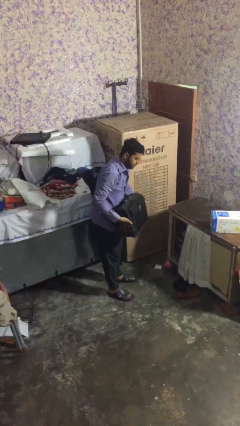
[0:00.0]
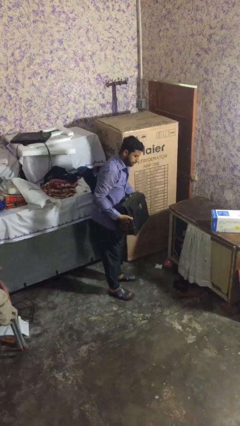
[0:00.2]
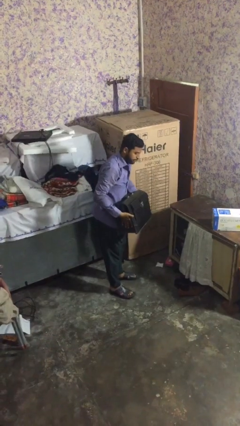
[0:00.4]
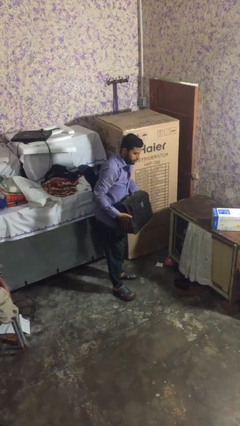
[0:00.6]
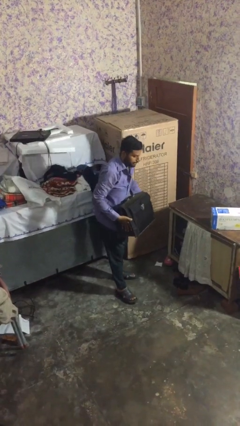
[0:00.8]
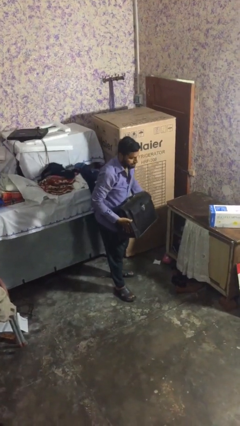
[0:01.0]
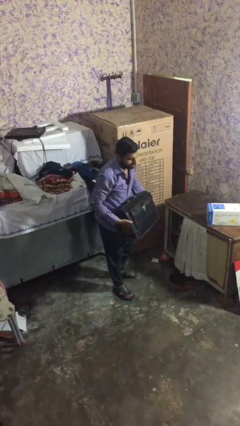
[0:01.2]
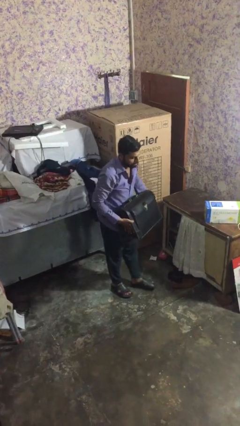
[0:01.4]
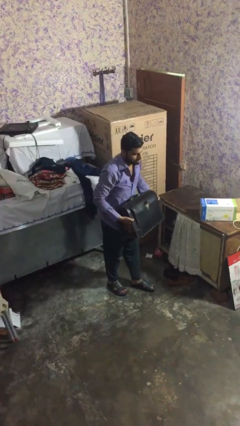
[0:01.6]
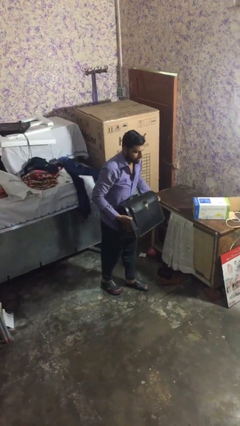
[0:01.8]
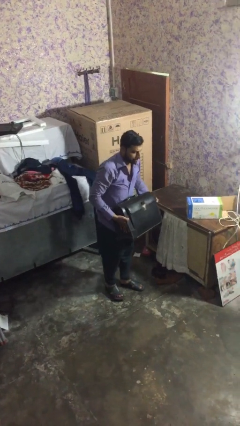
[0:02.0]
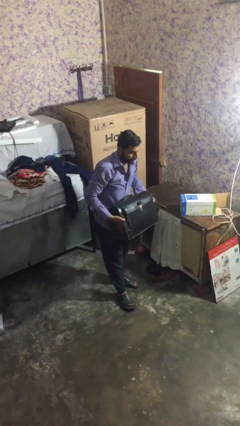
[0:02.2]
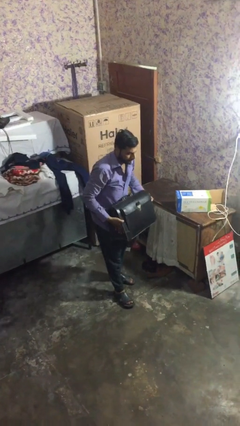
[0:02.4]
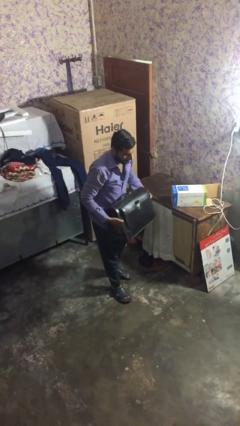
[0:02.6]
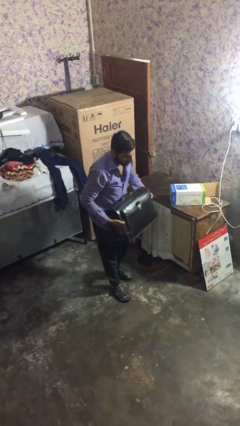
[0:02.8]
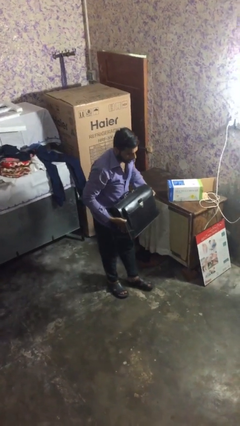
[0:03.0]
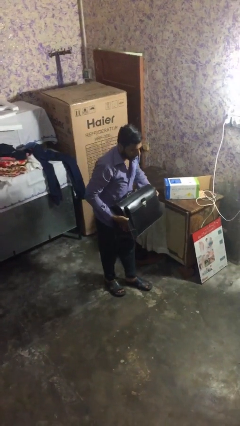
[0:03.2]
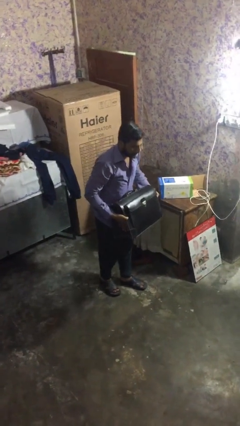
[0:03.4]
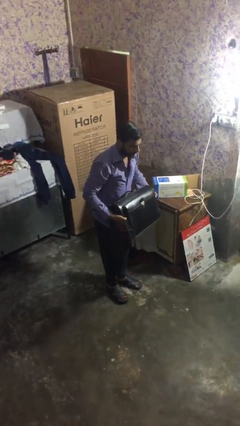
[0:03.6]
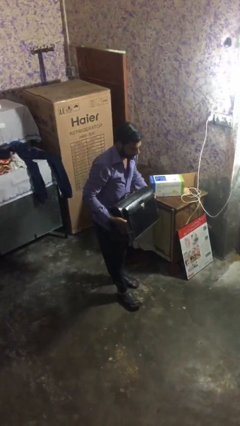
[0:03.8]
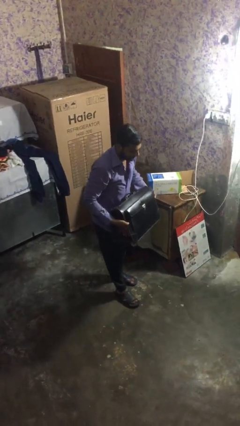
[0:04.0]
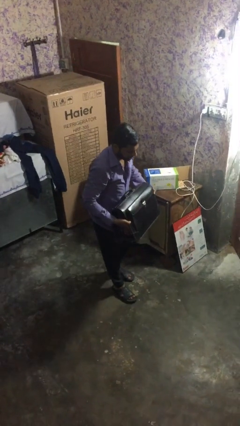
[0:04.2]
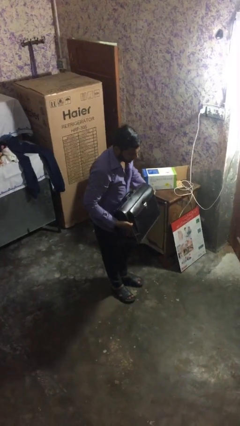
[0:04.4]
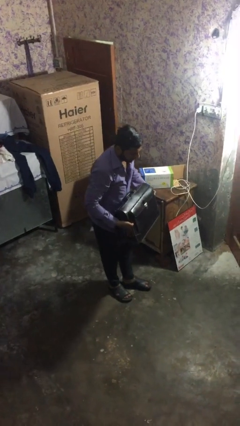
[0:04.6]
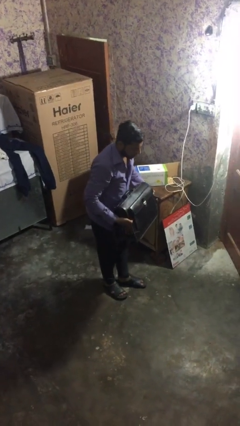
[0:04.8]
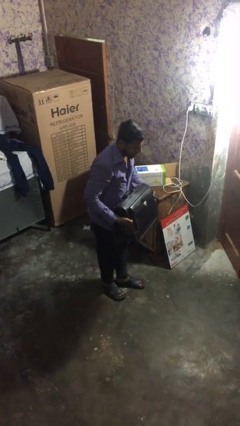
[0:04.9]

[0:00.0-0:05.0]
person carries heavy object

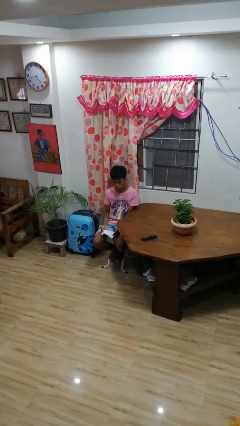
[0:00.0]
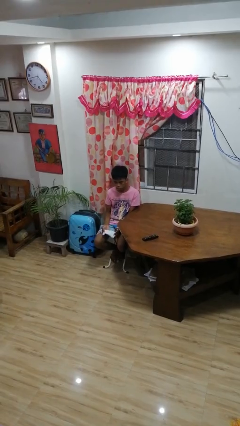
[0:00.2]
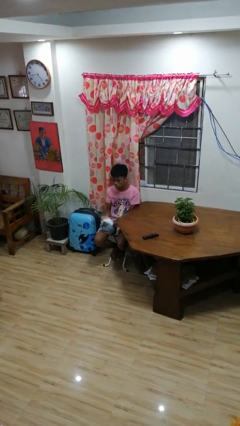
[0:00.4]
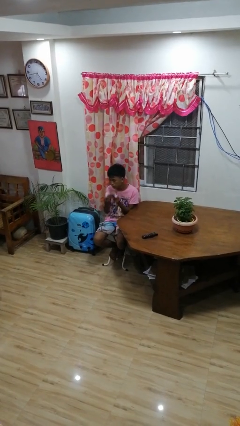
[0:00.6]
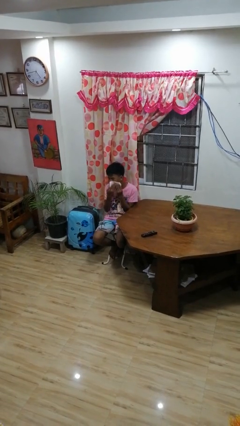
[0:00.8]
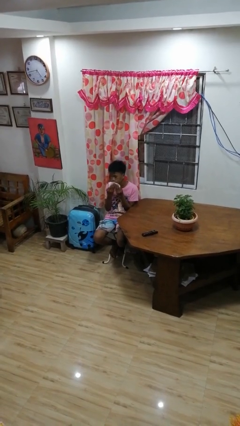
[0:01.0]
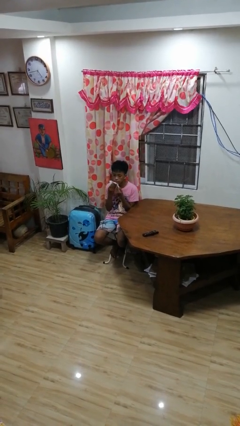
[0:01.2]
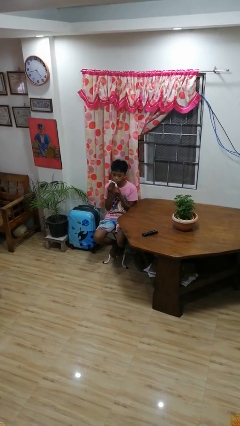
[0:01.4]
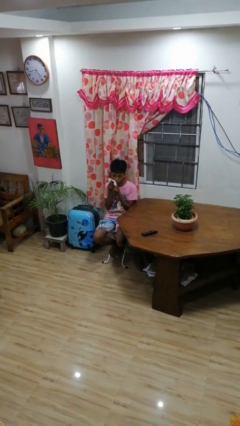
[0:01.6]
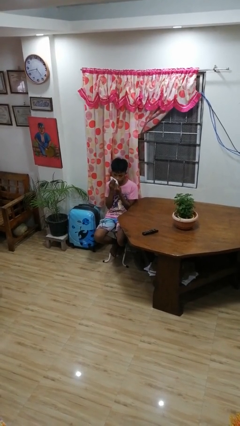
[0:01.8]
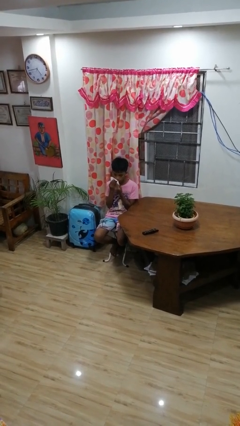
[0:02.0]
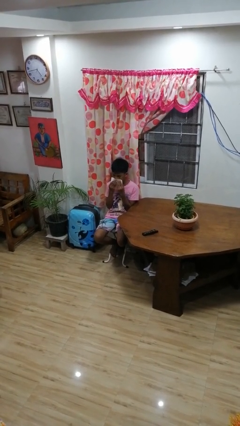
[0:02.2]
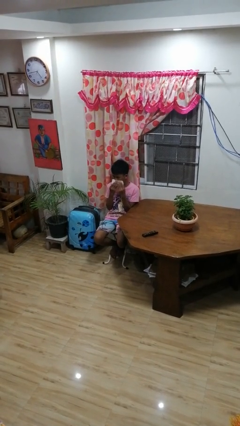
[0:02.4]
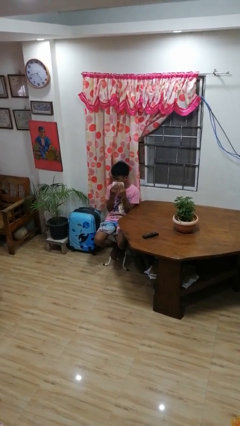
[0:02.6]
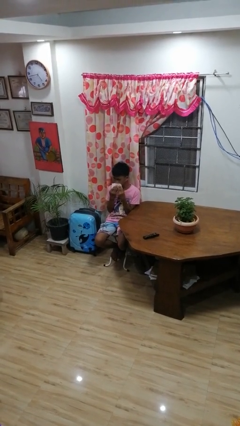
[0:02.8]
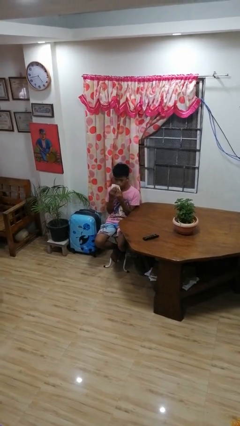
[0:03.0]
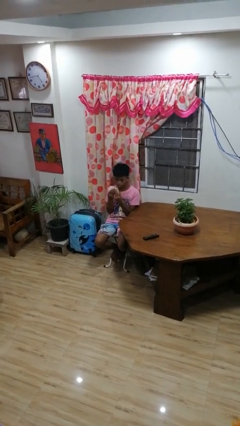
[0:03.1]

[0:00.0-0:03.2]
person wipes mouth with napkin

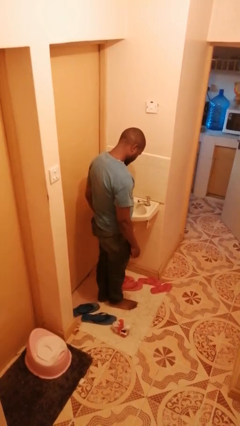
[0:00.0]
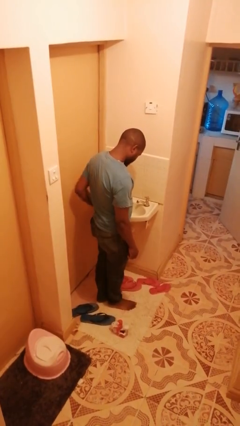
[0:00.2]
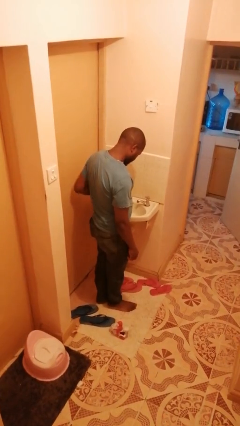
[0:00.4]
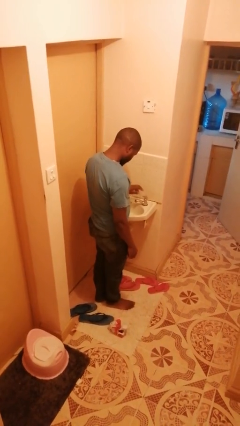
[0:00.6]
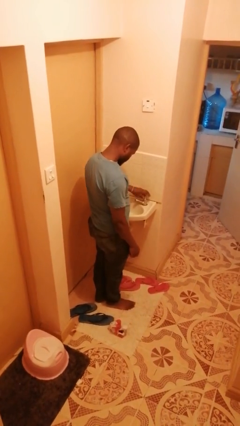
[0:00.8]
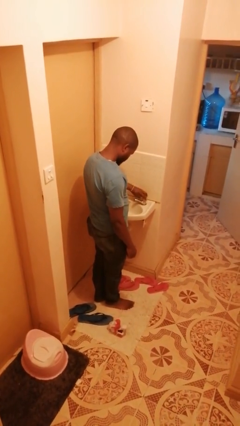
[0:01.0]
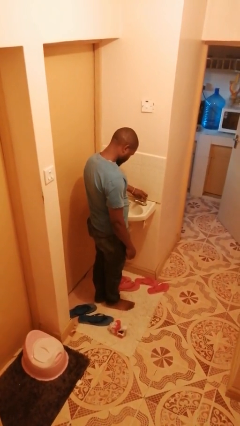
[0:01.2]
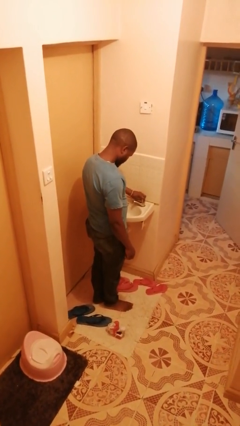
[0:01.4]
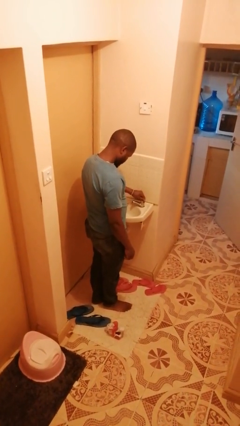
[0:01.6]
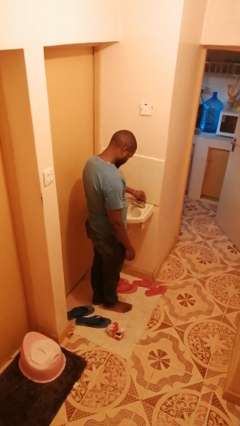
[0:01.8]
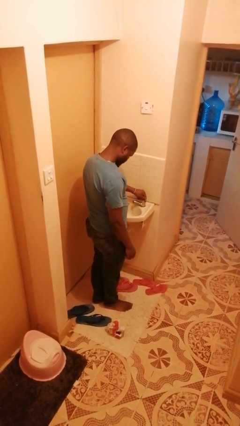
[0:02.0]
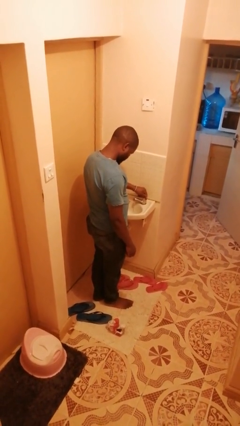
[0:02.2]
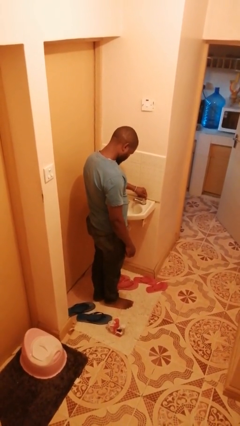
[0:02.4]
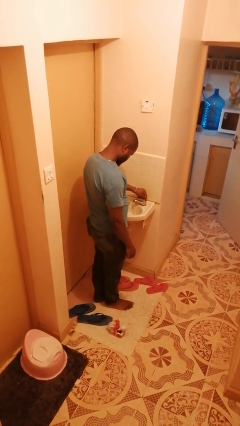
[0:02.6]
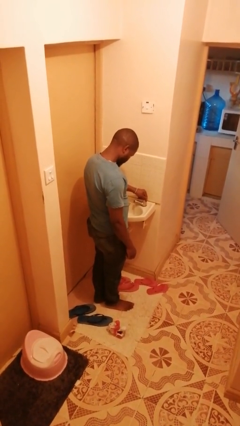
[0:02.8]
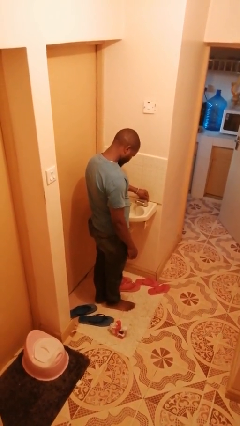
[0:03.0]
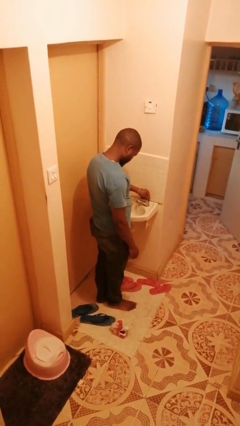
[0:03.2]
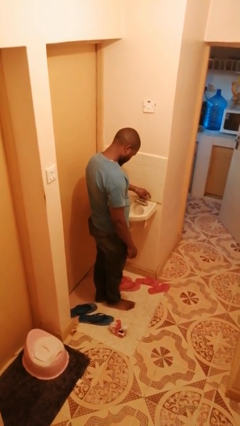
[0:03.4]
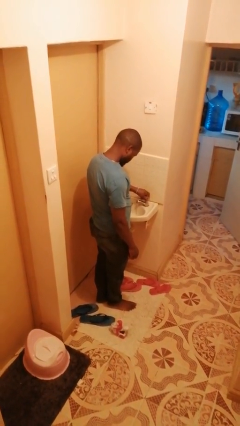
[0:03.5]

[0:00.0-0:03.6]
person turns on faucet

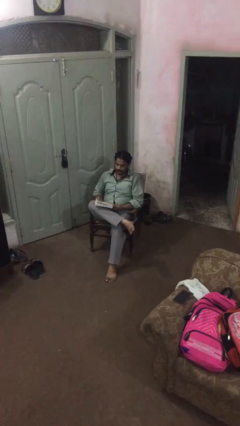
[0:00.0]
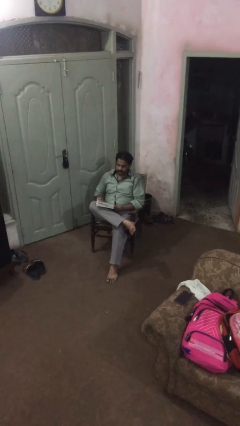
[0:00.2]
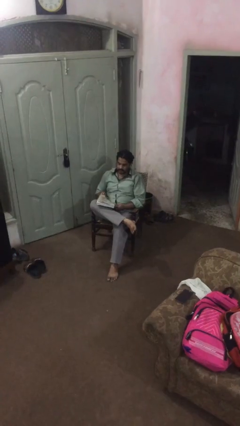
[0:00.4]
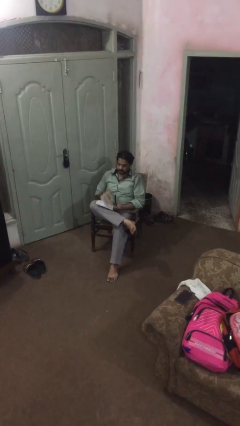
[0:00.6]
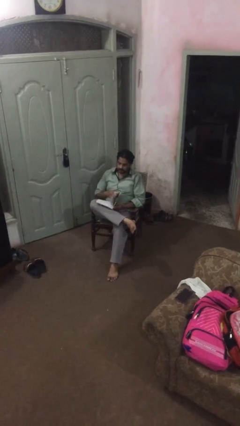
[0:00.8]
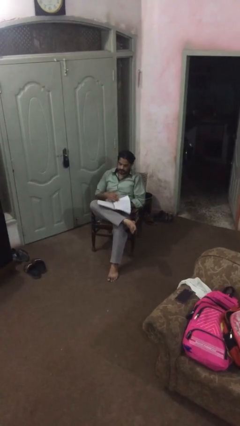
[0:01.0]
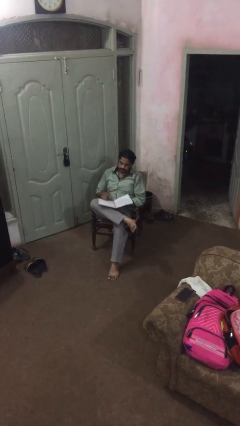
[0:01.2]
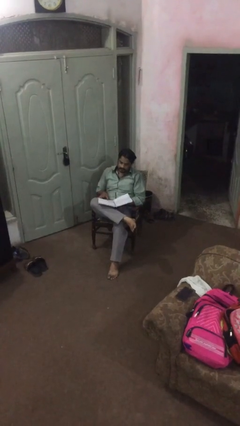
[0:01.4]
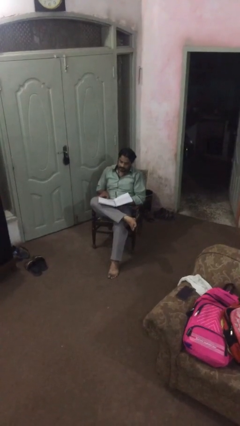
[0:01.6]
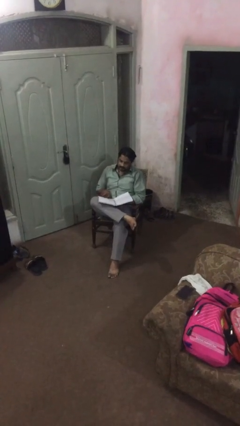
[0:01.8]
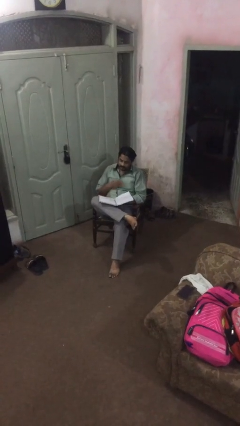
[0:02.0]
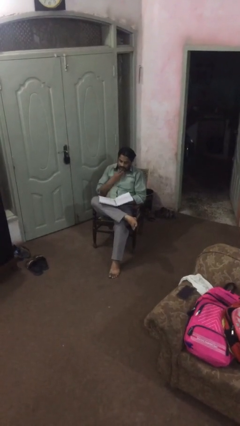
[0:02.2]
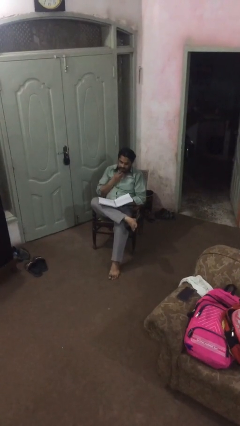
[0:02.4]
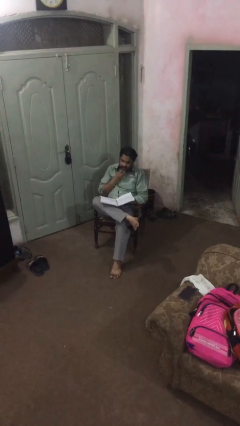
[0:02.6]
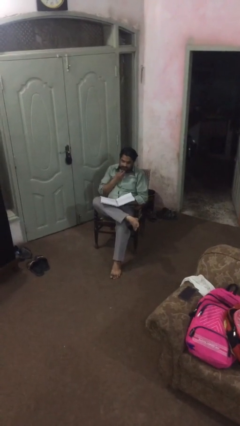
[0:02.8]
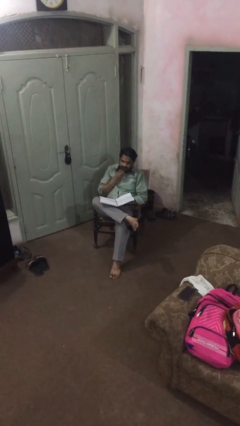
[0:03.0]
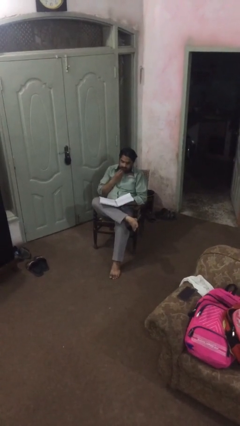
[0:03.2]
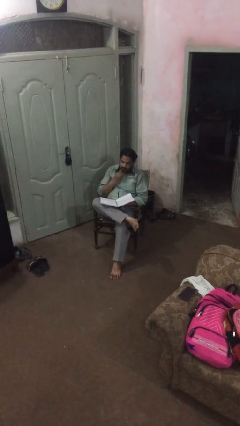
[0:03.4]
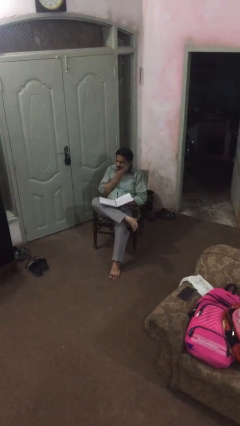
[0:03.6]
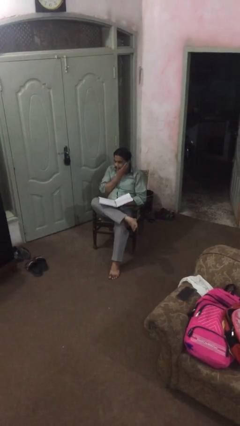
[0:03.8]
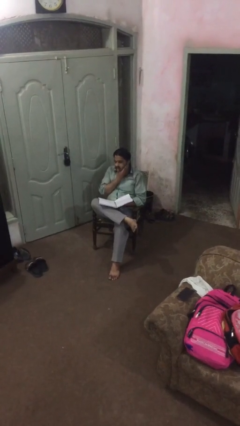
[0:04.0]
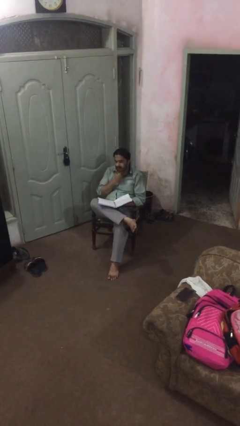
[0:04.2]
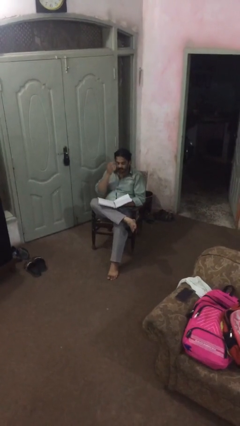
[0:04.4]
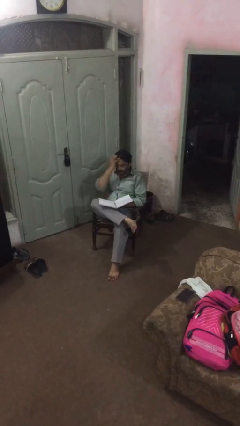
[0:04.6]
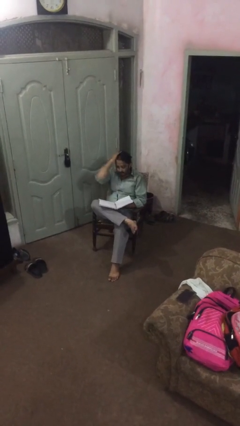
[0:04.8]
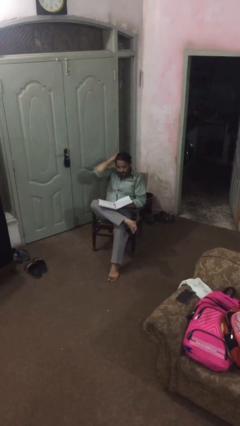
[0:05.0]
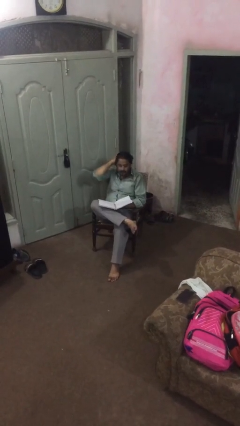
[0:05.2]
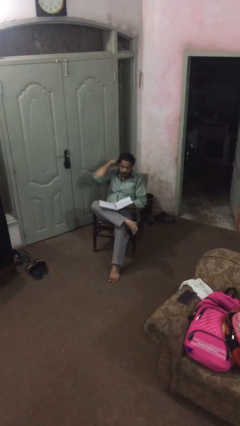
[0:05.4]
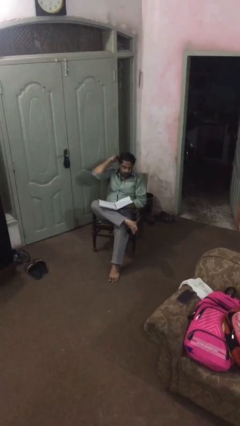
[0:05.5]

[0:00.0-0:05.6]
person reads document
